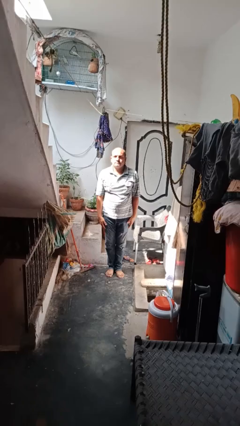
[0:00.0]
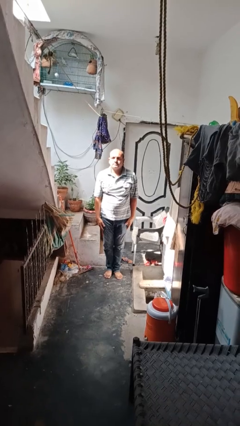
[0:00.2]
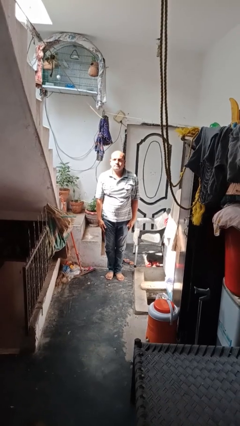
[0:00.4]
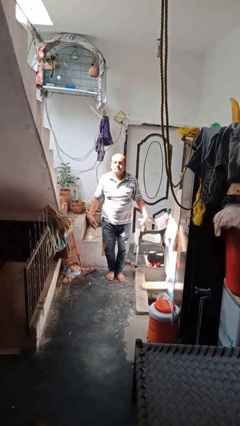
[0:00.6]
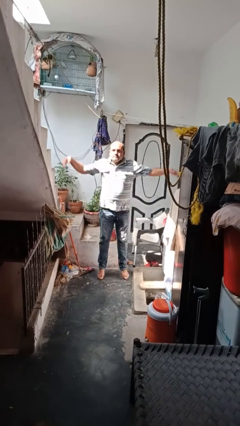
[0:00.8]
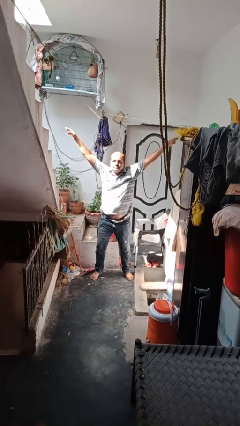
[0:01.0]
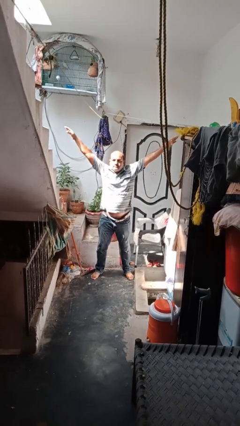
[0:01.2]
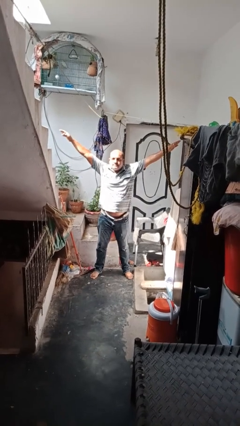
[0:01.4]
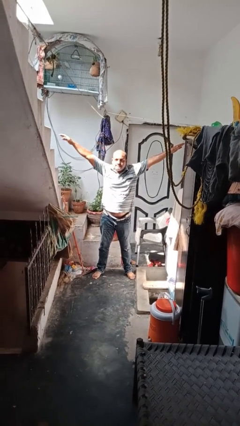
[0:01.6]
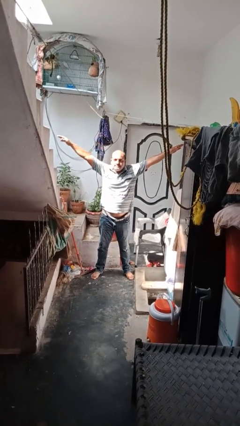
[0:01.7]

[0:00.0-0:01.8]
person exercises with jumping jacks

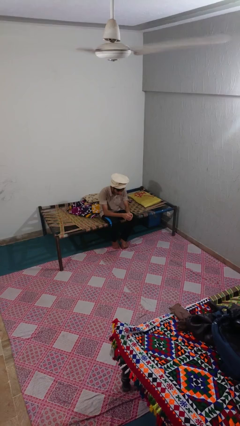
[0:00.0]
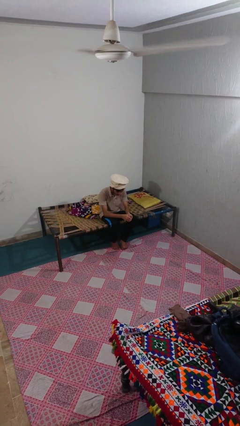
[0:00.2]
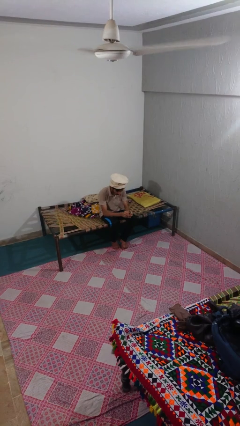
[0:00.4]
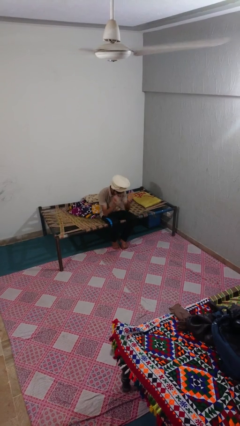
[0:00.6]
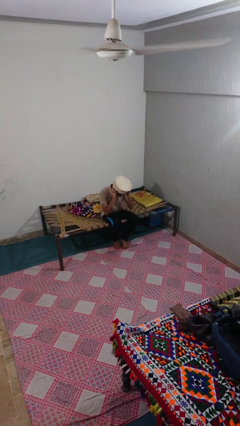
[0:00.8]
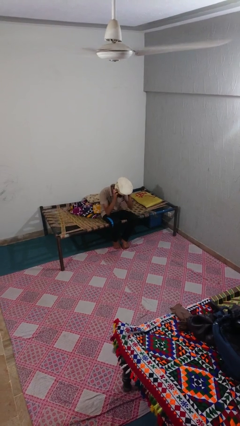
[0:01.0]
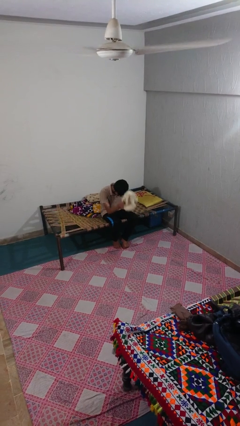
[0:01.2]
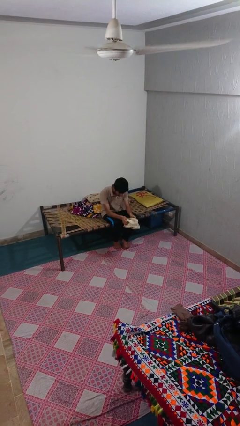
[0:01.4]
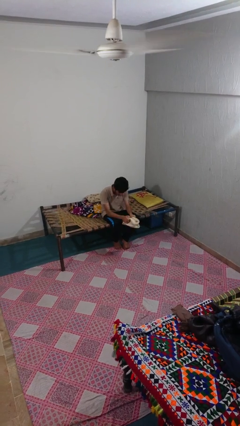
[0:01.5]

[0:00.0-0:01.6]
person takes off hat

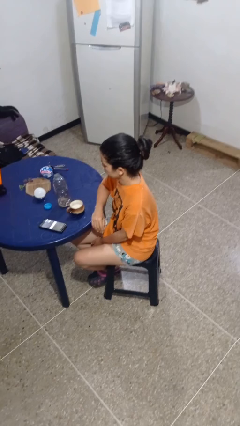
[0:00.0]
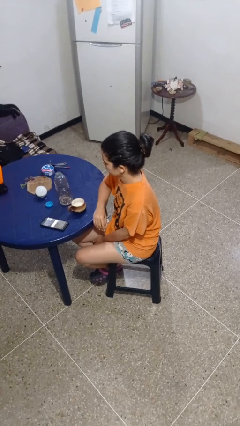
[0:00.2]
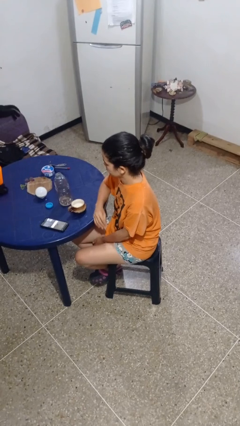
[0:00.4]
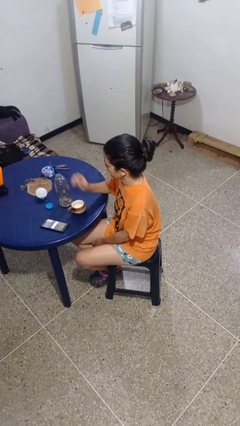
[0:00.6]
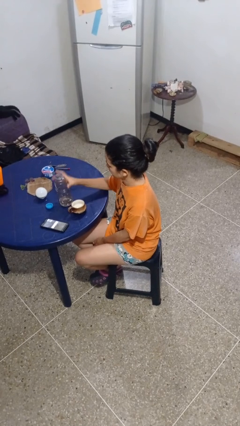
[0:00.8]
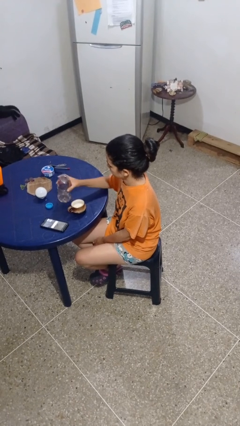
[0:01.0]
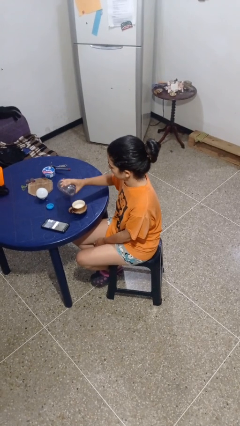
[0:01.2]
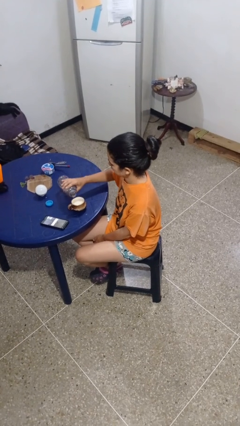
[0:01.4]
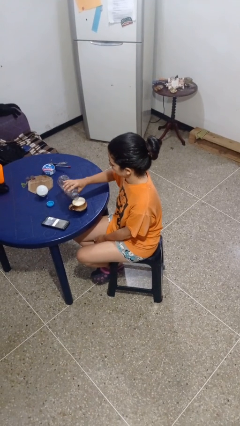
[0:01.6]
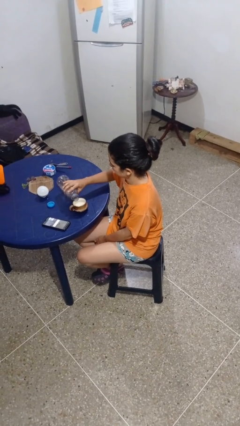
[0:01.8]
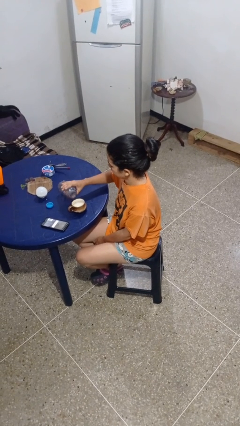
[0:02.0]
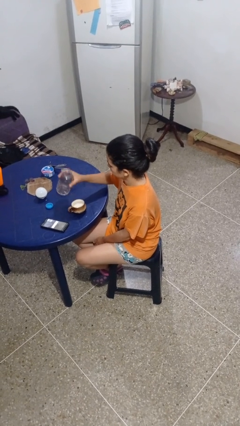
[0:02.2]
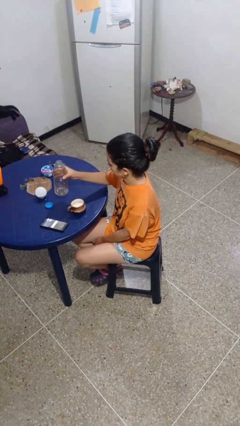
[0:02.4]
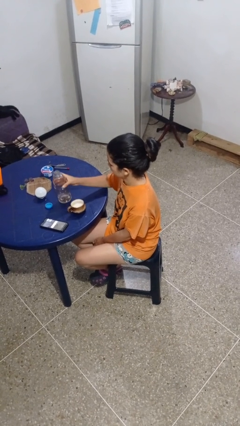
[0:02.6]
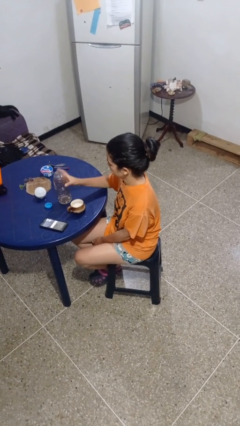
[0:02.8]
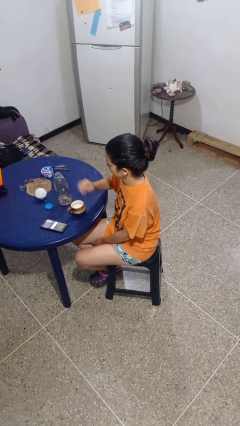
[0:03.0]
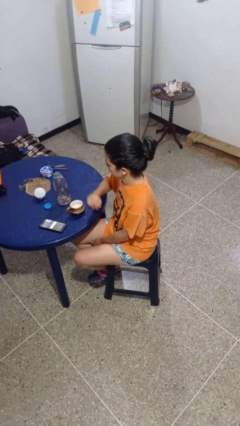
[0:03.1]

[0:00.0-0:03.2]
person pours liquid into cup

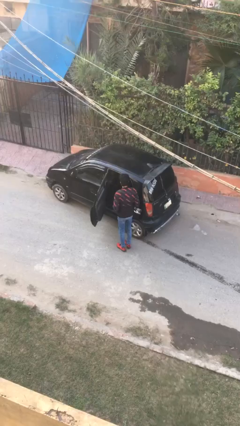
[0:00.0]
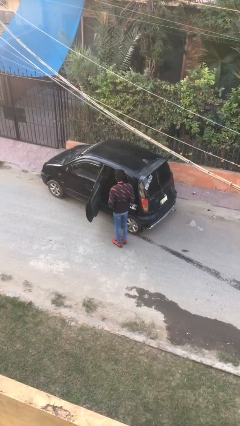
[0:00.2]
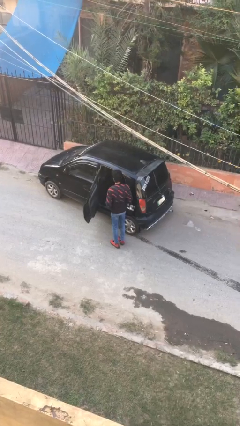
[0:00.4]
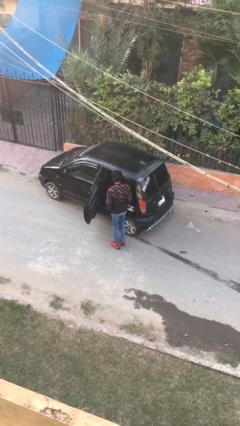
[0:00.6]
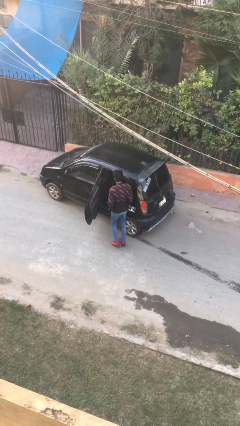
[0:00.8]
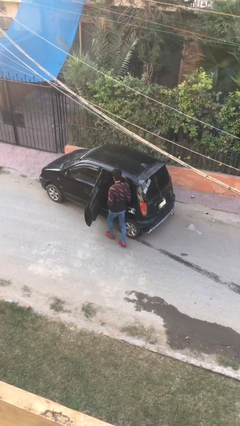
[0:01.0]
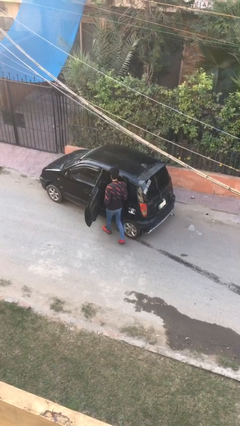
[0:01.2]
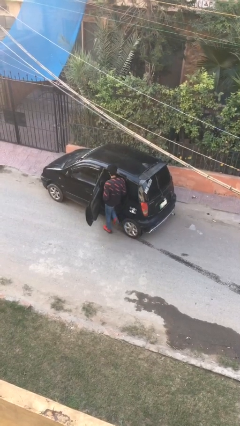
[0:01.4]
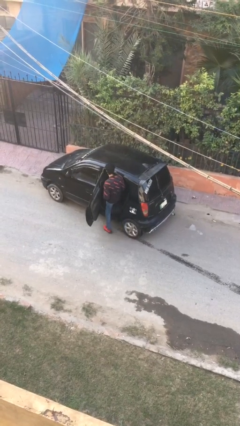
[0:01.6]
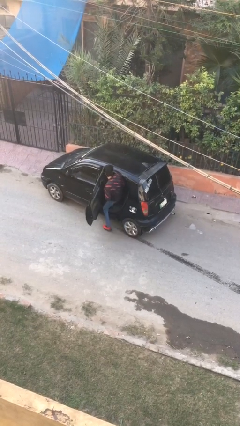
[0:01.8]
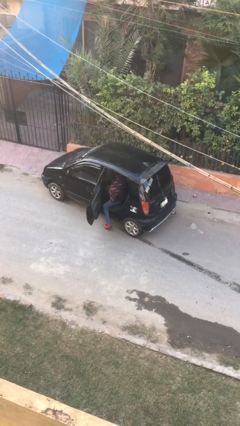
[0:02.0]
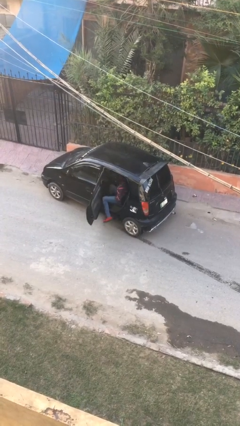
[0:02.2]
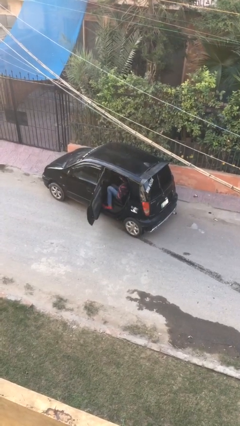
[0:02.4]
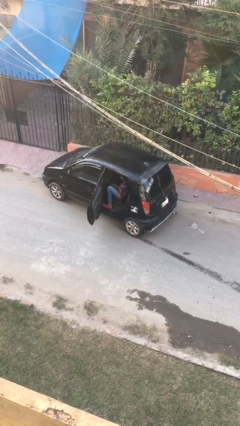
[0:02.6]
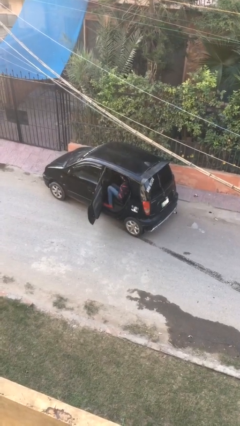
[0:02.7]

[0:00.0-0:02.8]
person enters car

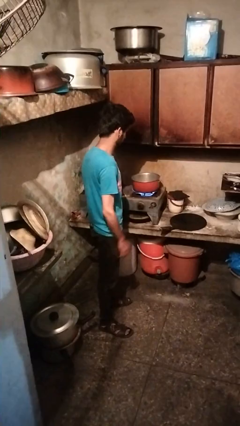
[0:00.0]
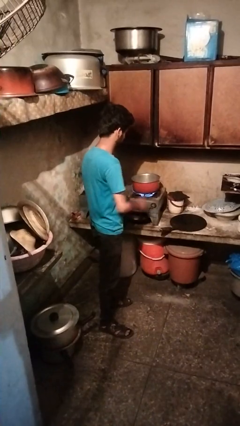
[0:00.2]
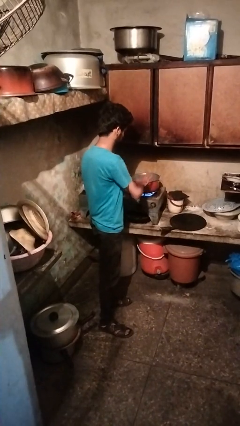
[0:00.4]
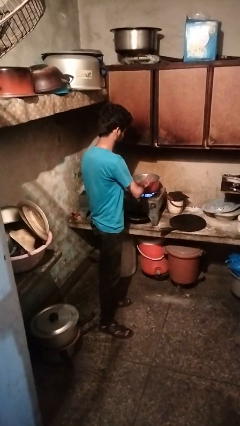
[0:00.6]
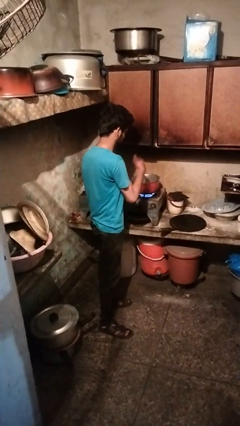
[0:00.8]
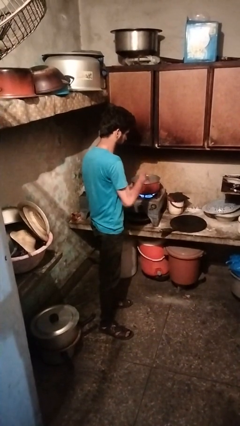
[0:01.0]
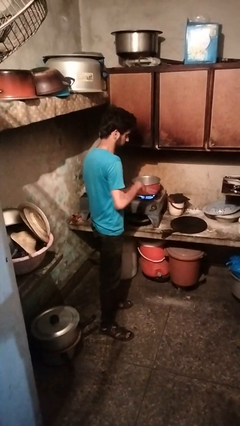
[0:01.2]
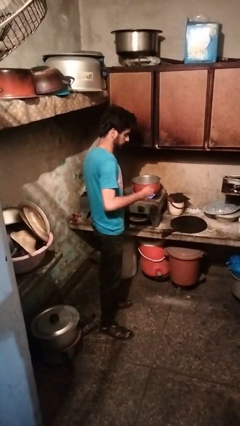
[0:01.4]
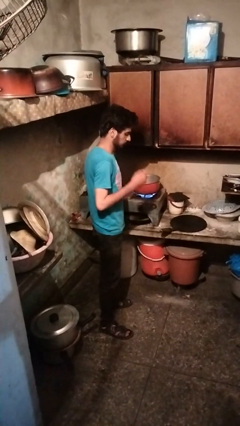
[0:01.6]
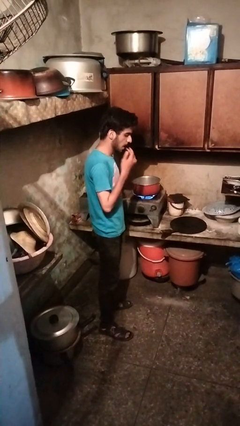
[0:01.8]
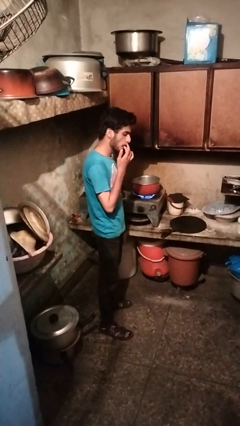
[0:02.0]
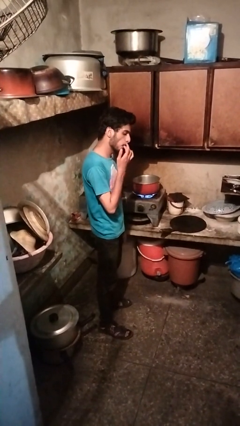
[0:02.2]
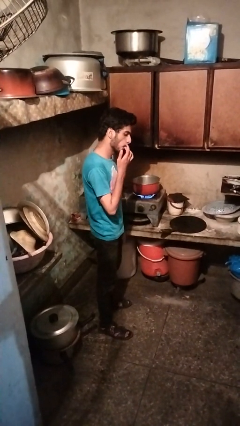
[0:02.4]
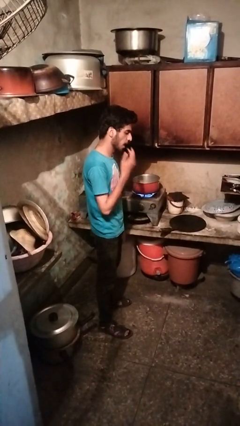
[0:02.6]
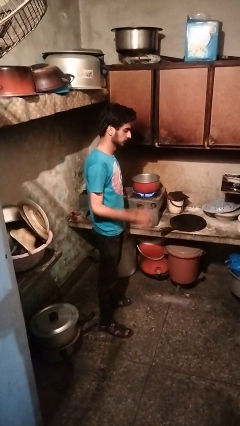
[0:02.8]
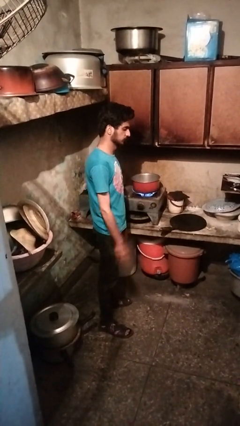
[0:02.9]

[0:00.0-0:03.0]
person burns hand

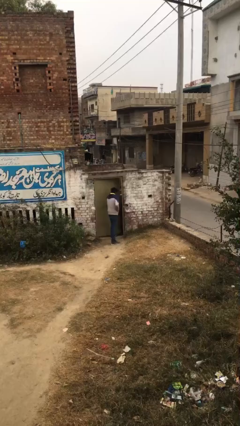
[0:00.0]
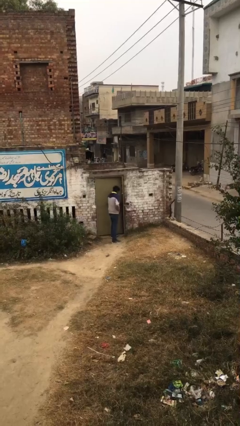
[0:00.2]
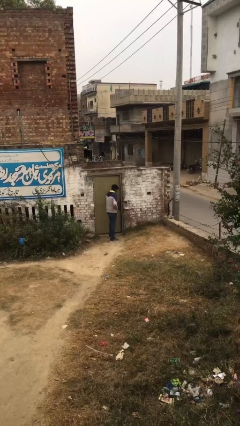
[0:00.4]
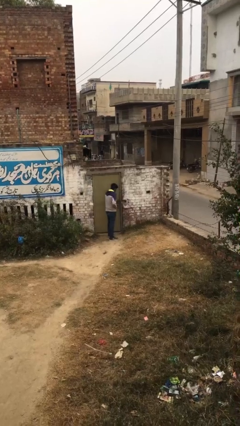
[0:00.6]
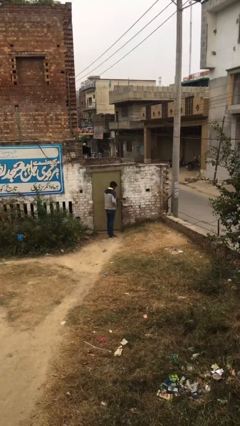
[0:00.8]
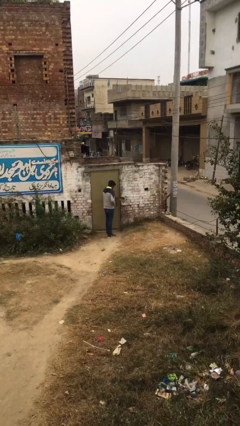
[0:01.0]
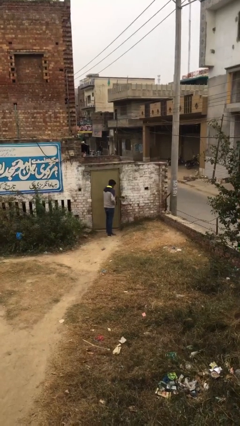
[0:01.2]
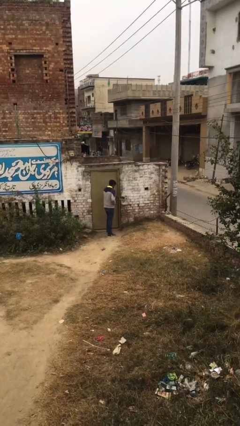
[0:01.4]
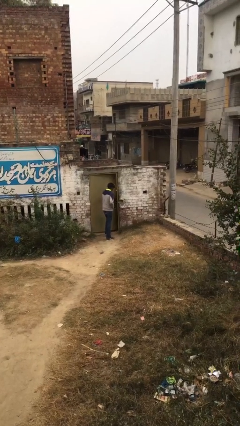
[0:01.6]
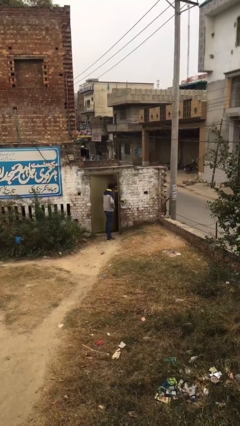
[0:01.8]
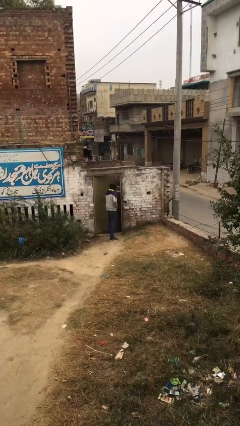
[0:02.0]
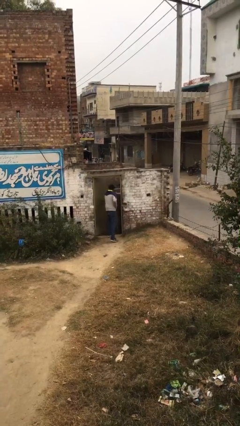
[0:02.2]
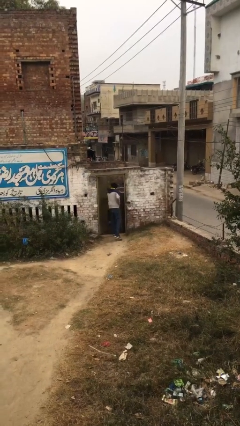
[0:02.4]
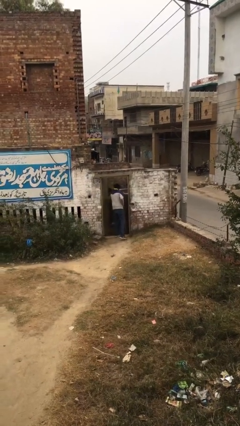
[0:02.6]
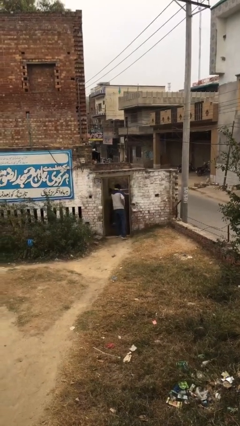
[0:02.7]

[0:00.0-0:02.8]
person closes facility door

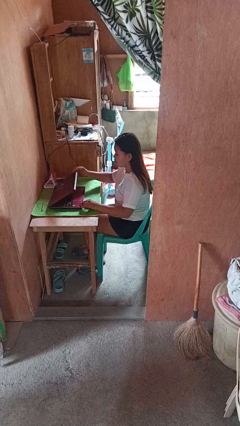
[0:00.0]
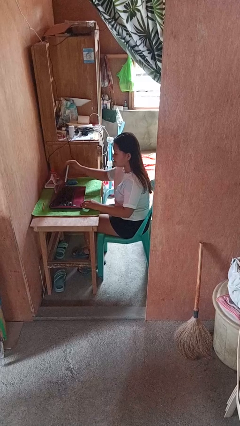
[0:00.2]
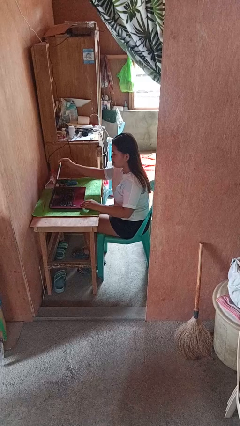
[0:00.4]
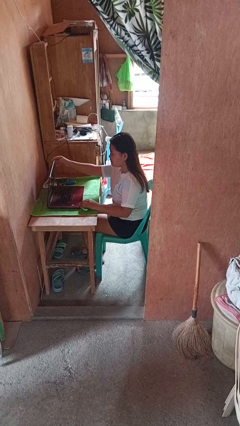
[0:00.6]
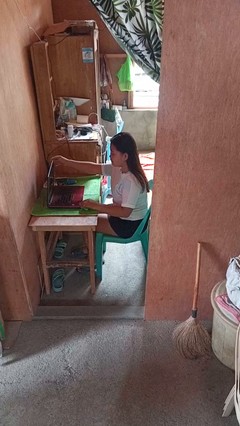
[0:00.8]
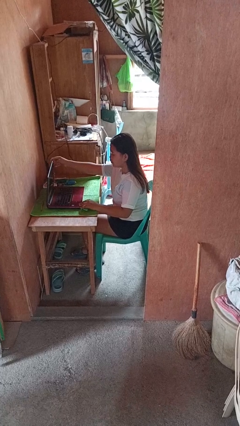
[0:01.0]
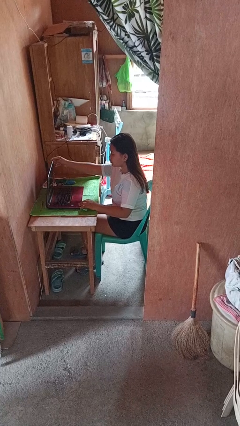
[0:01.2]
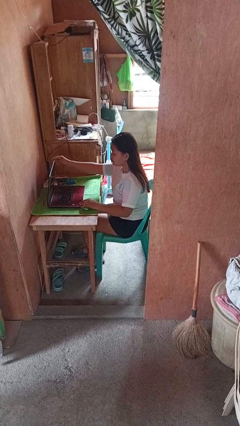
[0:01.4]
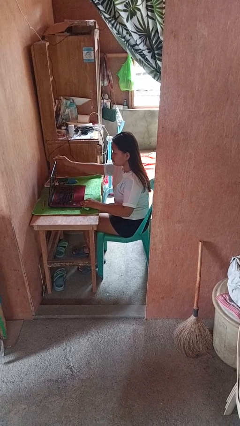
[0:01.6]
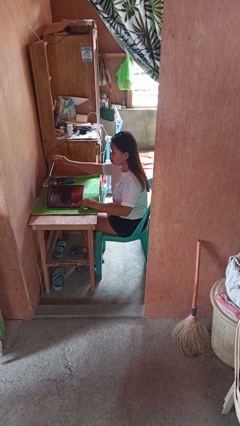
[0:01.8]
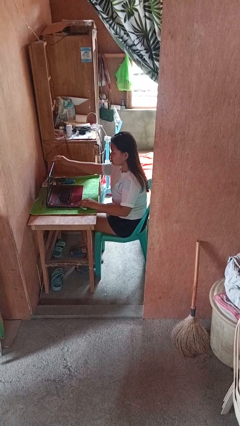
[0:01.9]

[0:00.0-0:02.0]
person opens laptop

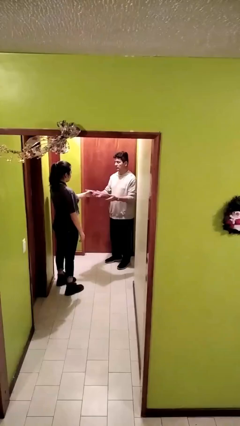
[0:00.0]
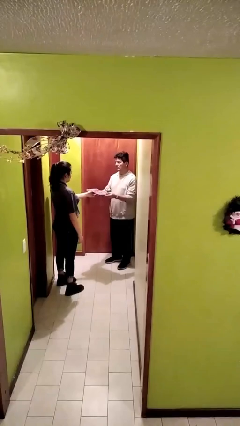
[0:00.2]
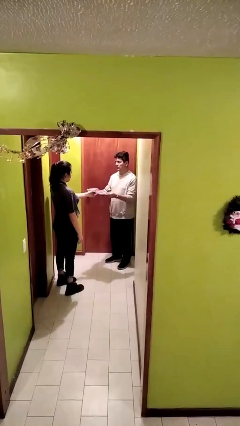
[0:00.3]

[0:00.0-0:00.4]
person transfers object to person
